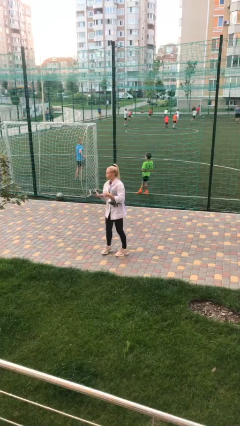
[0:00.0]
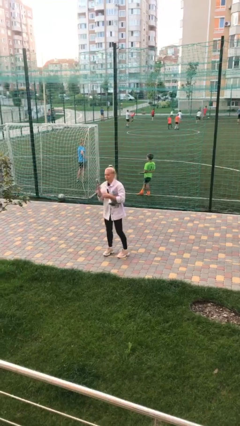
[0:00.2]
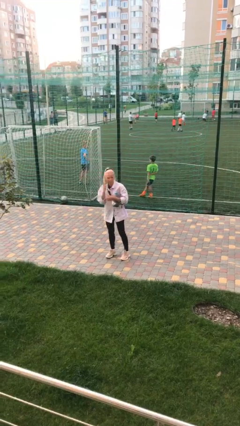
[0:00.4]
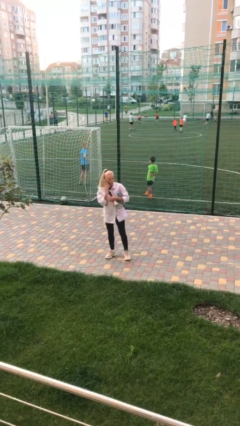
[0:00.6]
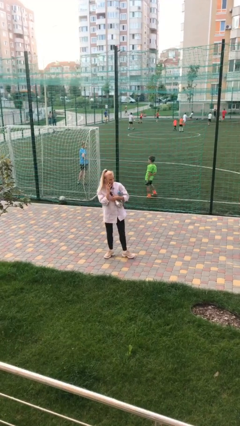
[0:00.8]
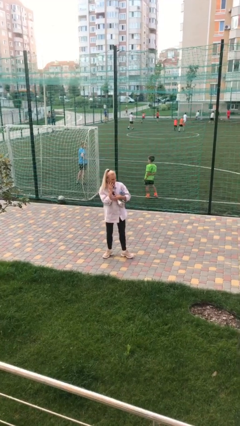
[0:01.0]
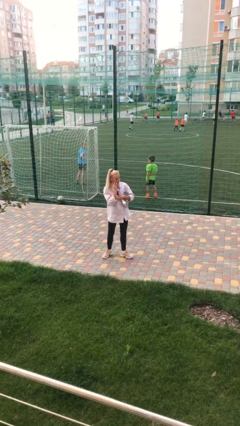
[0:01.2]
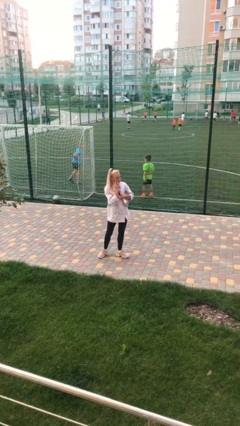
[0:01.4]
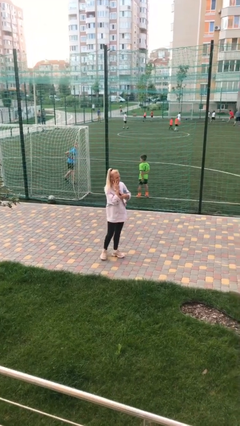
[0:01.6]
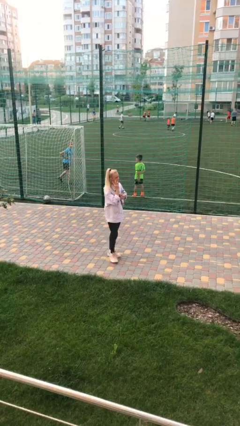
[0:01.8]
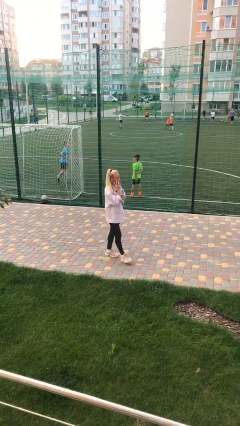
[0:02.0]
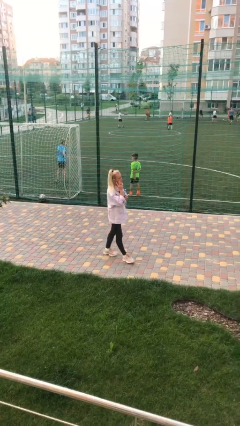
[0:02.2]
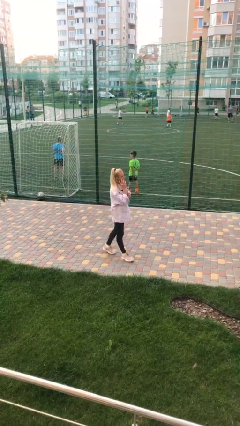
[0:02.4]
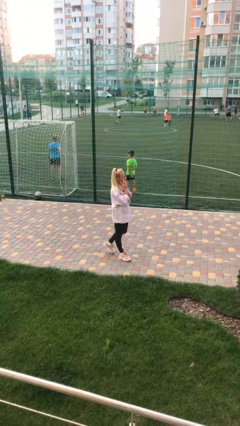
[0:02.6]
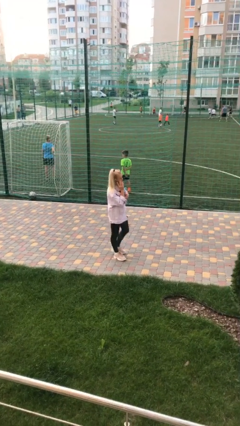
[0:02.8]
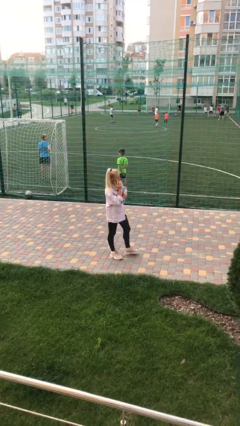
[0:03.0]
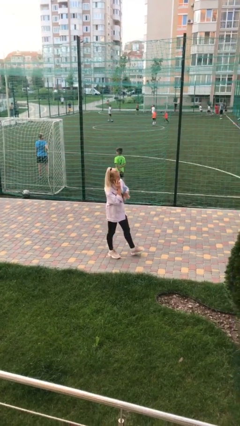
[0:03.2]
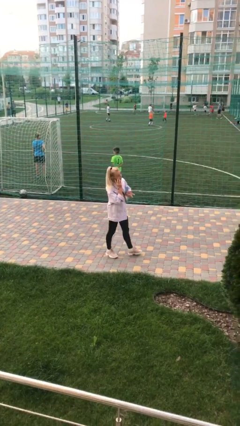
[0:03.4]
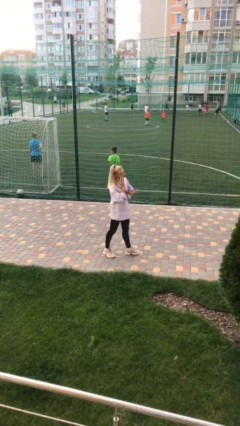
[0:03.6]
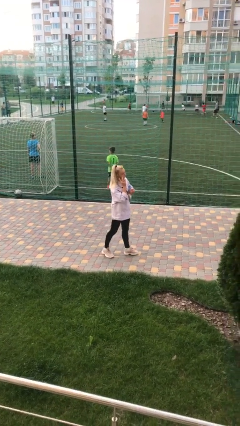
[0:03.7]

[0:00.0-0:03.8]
person talks on phone

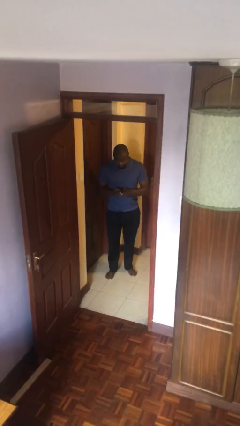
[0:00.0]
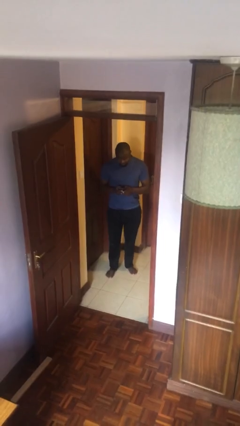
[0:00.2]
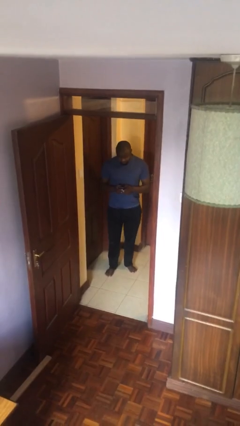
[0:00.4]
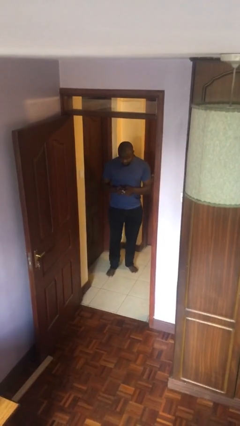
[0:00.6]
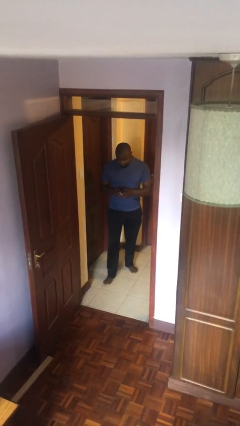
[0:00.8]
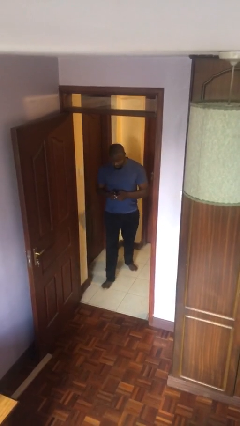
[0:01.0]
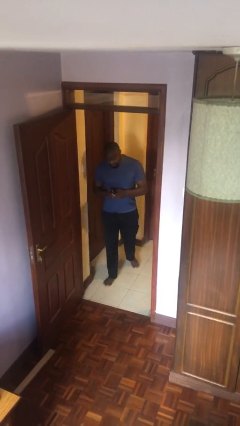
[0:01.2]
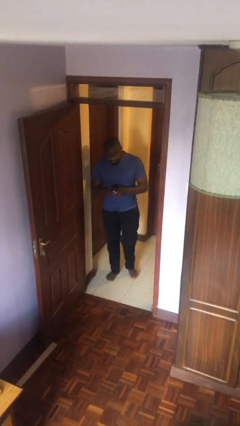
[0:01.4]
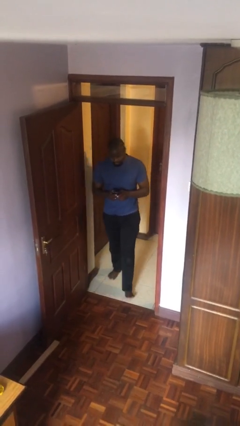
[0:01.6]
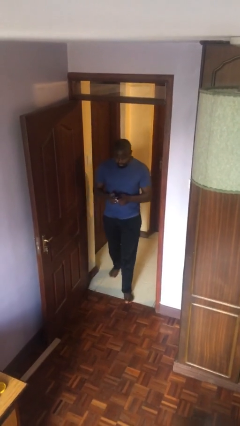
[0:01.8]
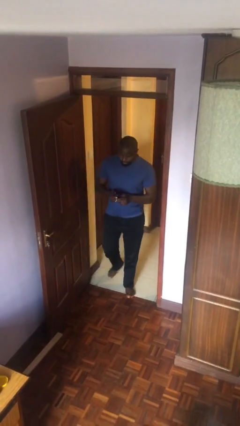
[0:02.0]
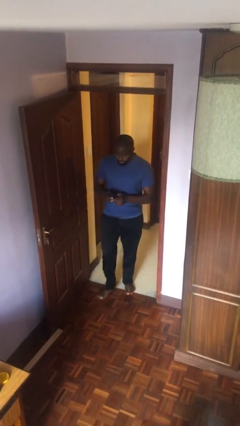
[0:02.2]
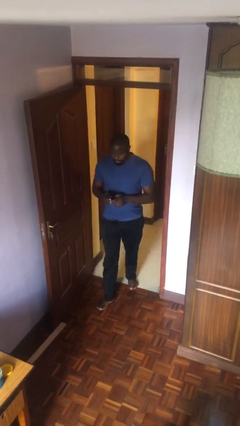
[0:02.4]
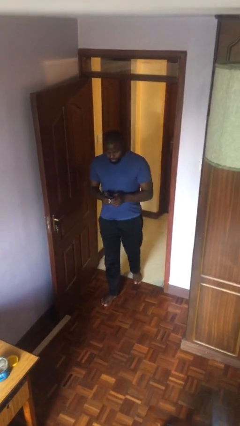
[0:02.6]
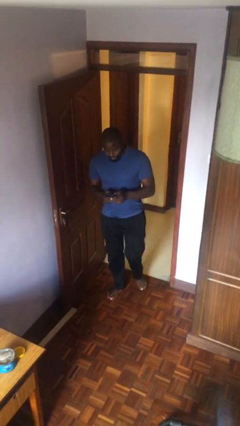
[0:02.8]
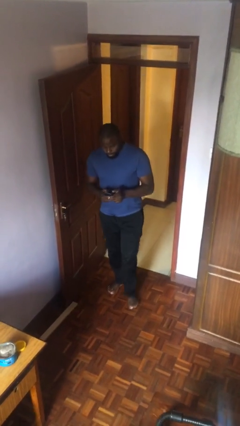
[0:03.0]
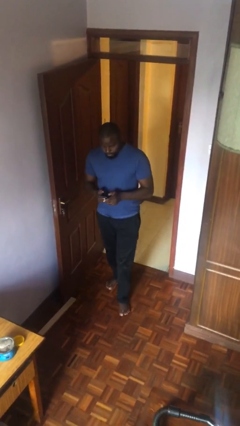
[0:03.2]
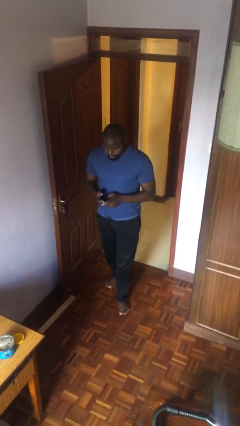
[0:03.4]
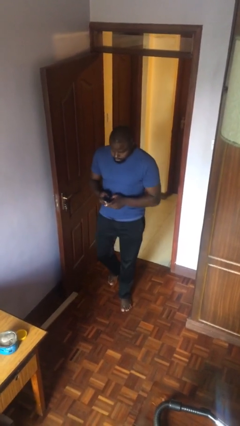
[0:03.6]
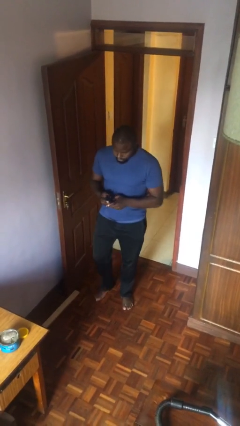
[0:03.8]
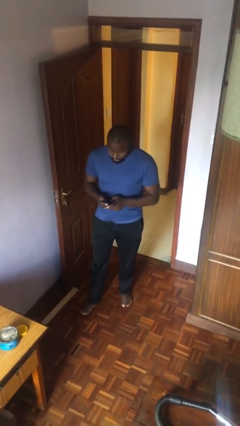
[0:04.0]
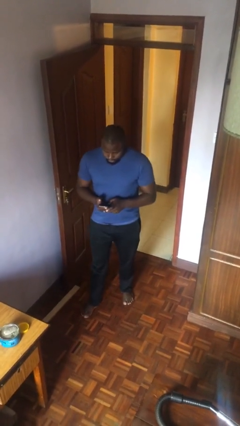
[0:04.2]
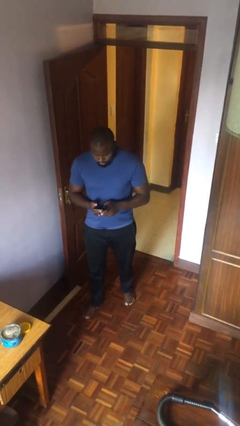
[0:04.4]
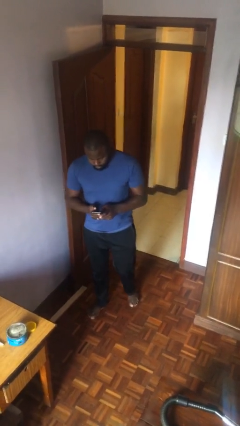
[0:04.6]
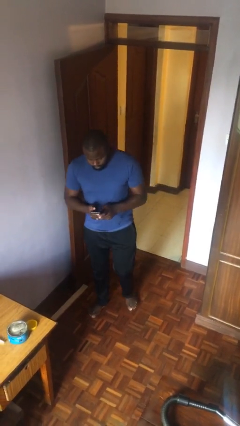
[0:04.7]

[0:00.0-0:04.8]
person enters scene through structure

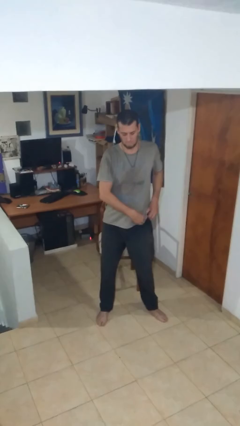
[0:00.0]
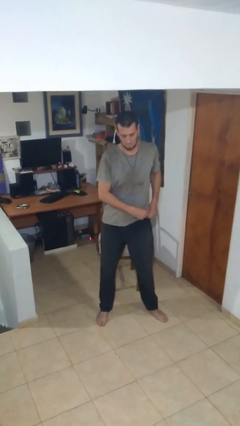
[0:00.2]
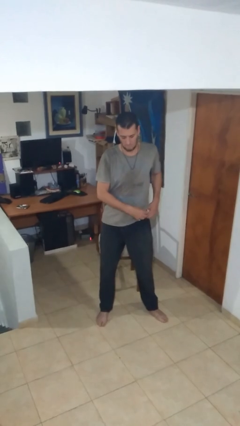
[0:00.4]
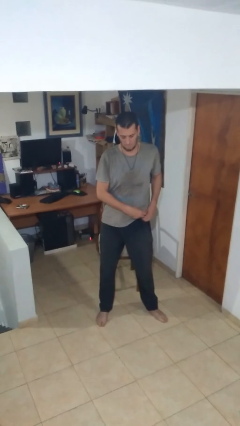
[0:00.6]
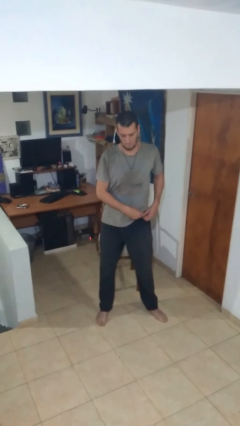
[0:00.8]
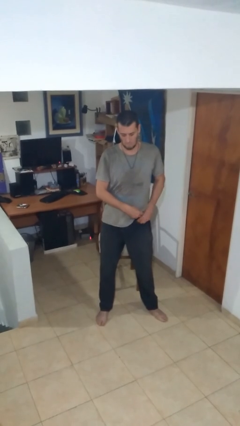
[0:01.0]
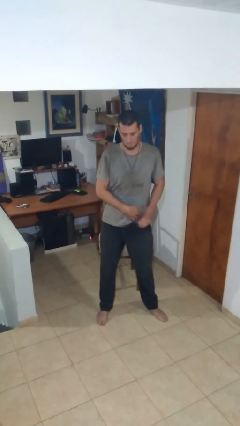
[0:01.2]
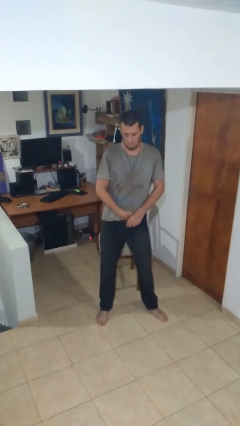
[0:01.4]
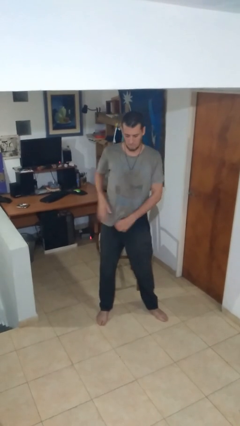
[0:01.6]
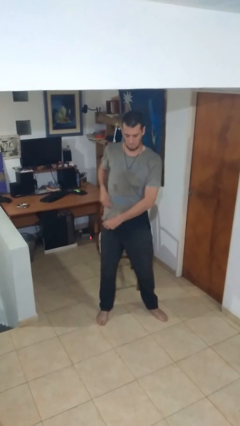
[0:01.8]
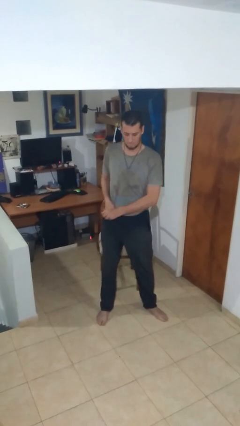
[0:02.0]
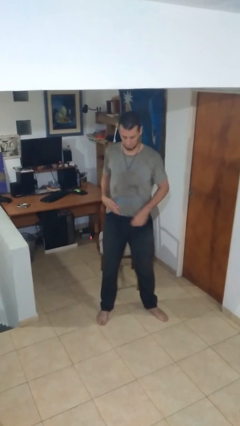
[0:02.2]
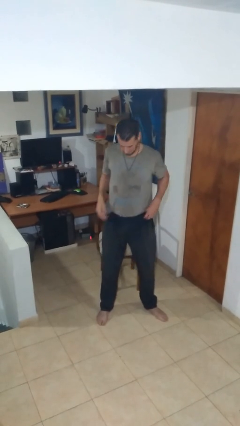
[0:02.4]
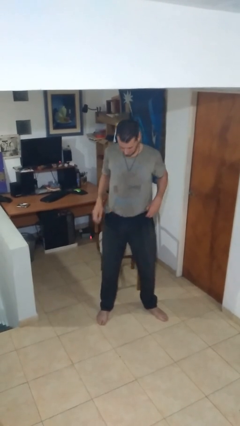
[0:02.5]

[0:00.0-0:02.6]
person tucks in shirt

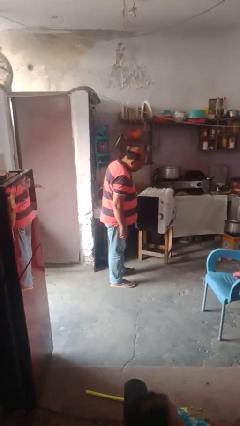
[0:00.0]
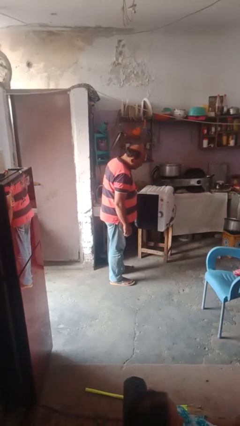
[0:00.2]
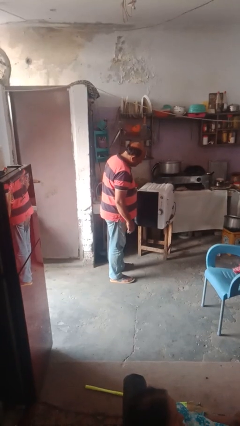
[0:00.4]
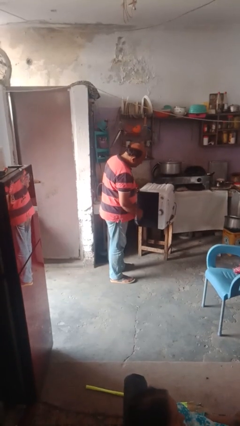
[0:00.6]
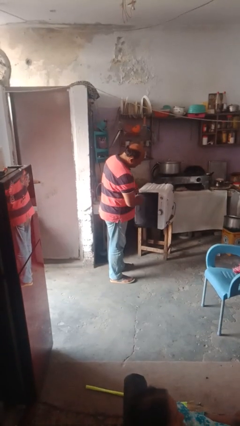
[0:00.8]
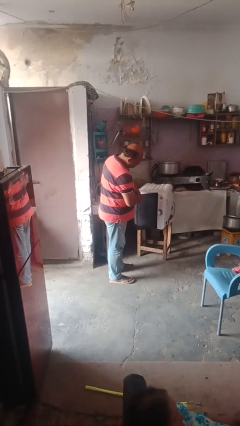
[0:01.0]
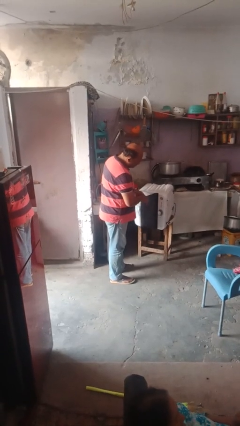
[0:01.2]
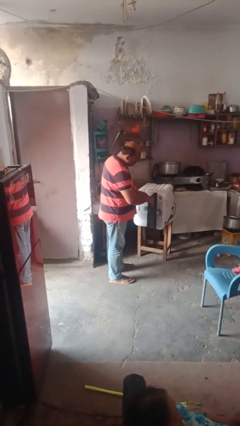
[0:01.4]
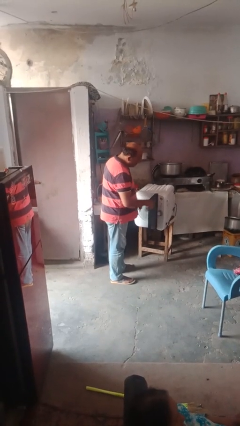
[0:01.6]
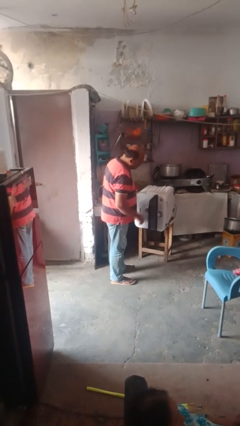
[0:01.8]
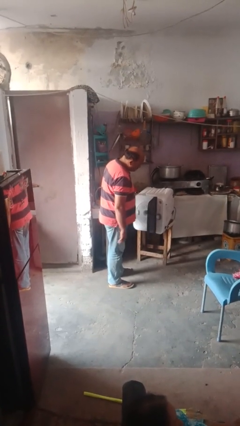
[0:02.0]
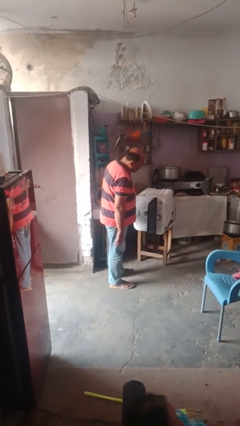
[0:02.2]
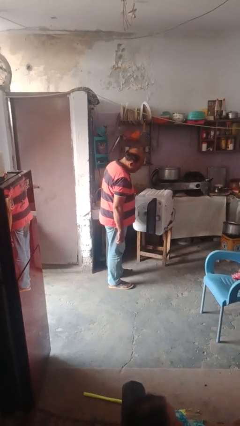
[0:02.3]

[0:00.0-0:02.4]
person opens dishwasher

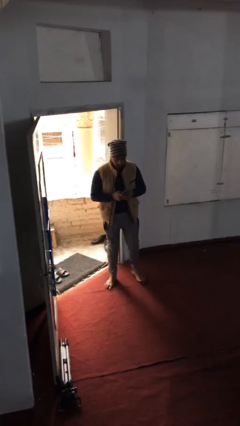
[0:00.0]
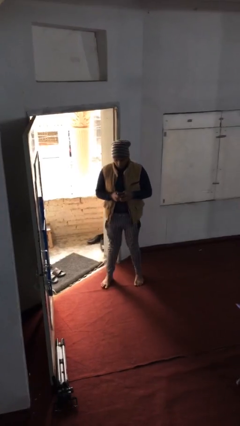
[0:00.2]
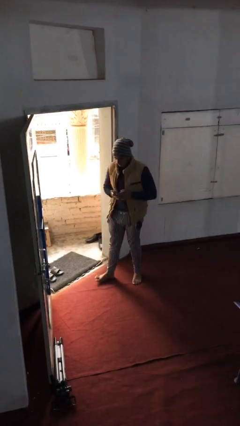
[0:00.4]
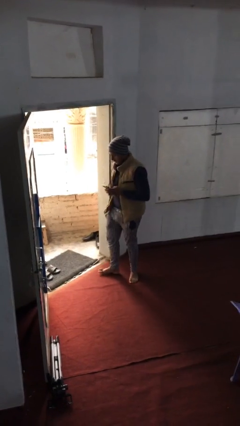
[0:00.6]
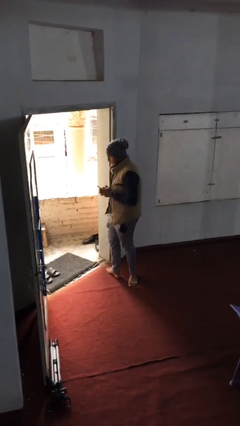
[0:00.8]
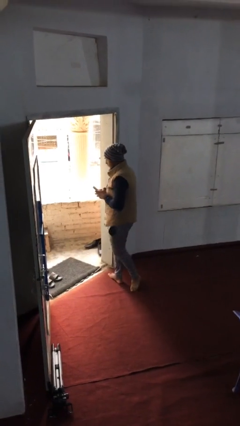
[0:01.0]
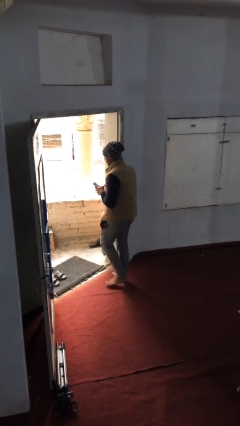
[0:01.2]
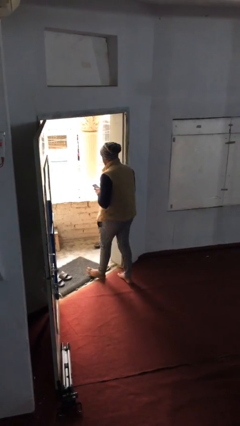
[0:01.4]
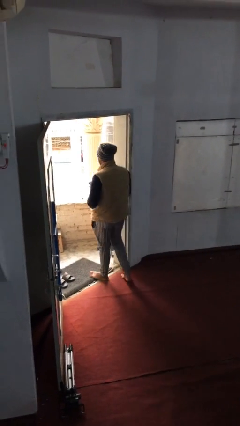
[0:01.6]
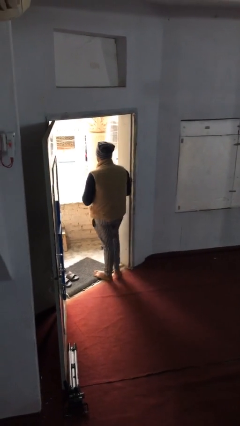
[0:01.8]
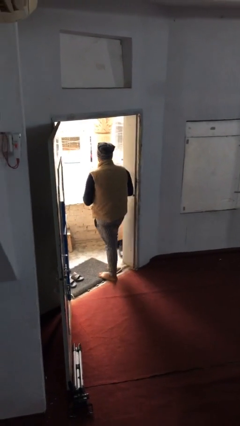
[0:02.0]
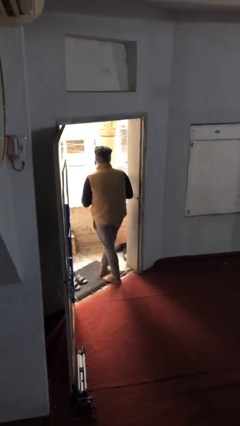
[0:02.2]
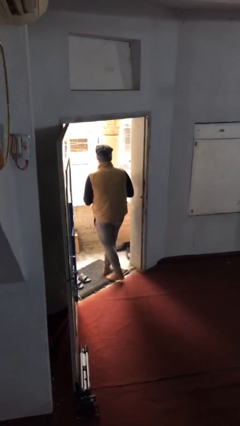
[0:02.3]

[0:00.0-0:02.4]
person exits scene through structure

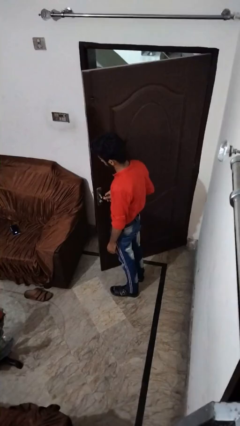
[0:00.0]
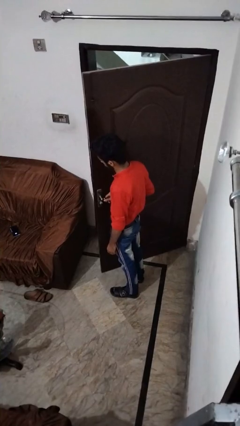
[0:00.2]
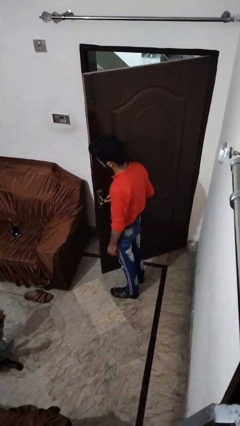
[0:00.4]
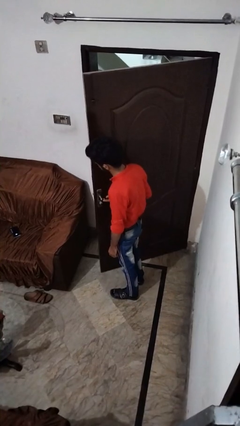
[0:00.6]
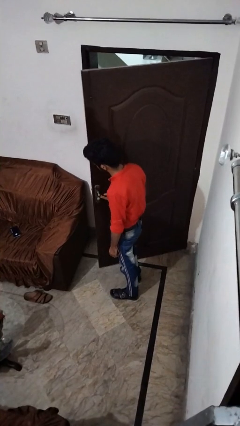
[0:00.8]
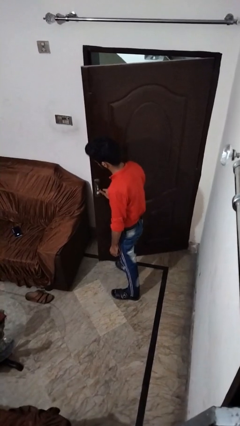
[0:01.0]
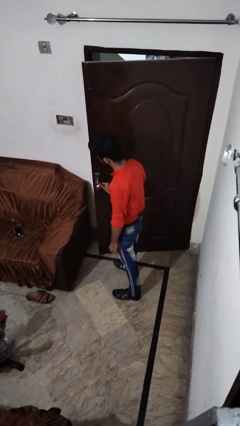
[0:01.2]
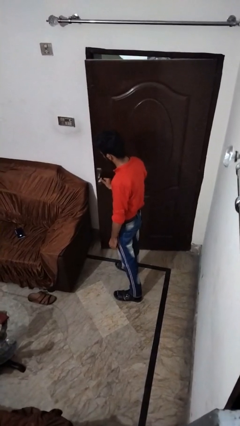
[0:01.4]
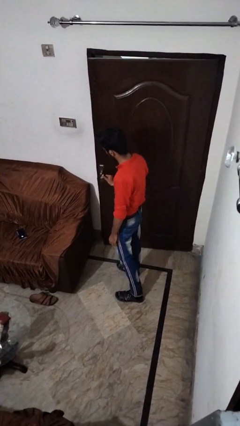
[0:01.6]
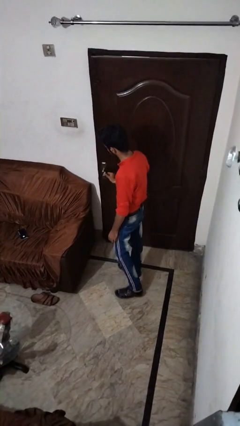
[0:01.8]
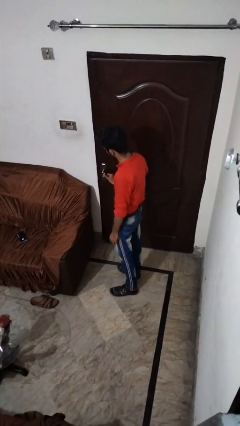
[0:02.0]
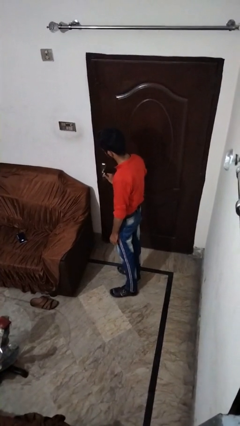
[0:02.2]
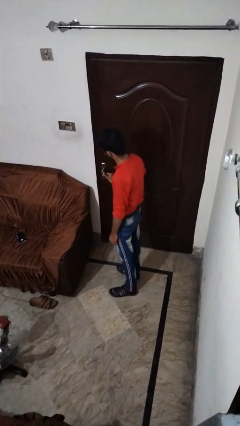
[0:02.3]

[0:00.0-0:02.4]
person closes facility door
